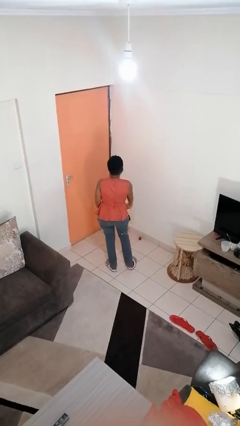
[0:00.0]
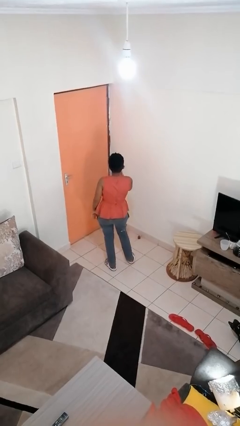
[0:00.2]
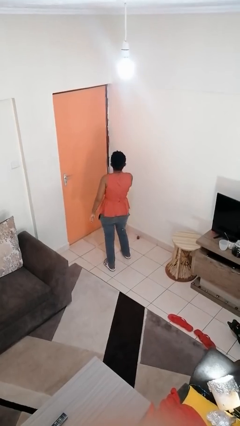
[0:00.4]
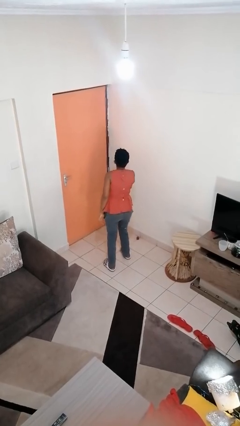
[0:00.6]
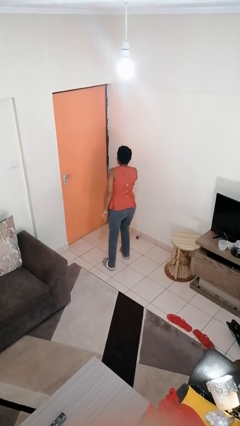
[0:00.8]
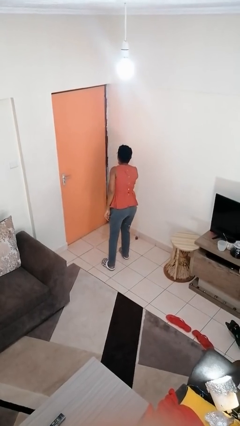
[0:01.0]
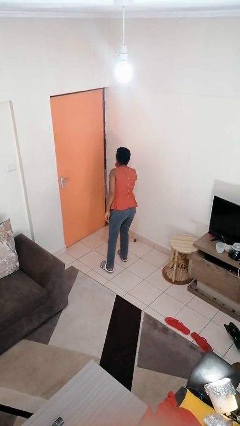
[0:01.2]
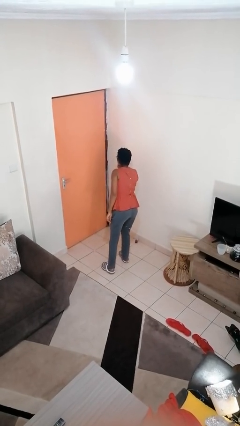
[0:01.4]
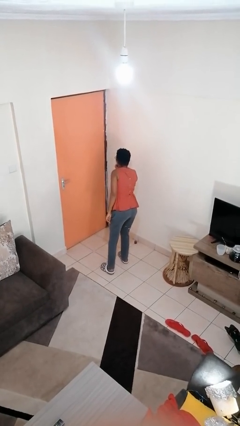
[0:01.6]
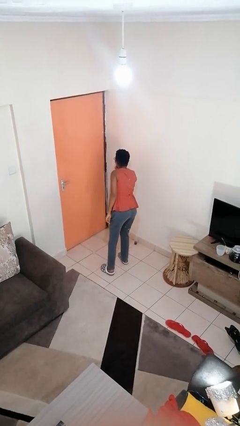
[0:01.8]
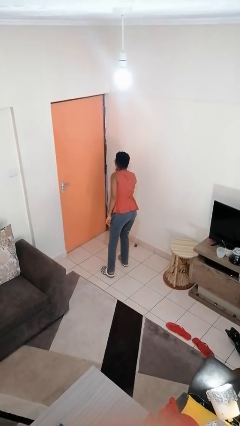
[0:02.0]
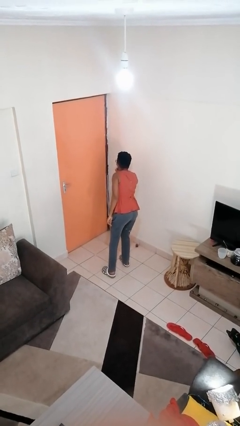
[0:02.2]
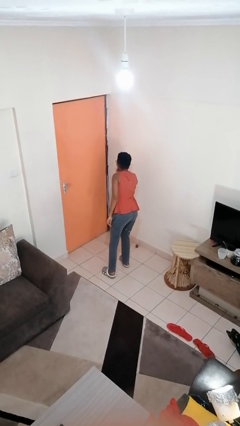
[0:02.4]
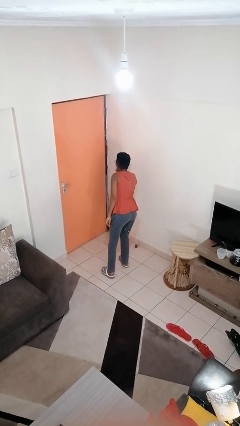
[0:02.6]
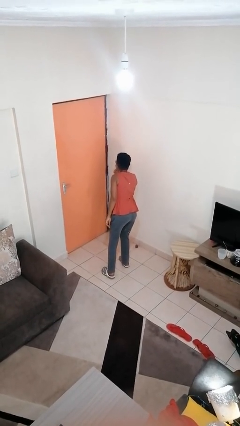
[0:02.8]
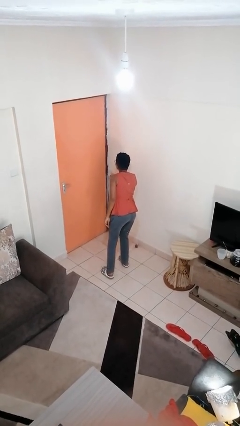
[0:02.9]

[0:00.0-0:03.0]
person gestures be quiet

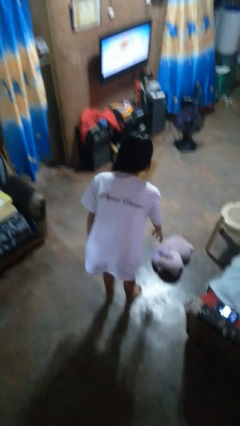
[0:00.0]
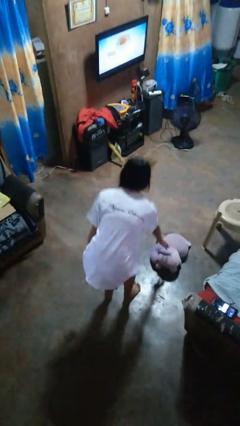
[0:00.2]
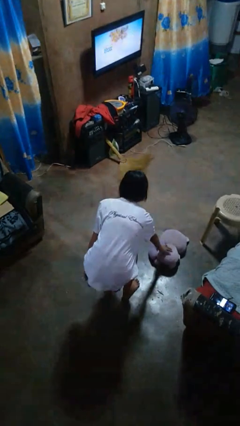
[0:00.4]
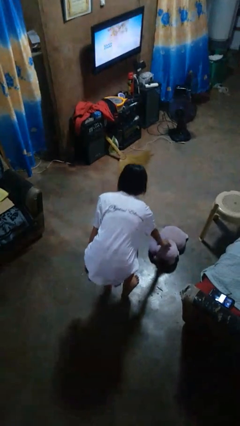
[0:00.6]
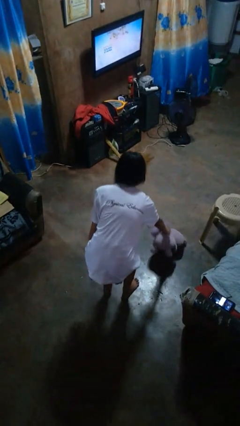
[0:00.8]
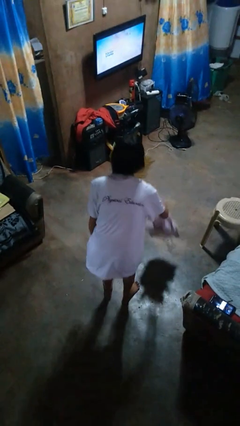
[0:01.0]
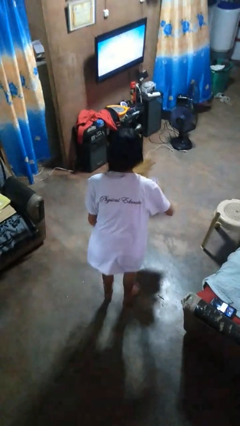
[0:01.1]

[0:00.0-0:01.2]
person picks up object from floor

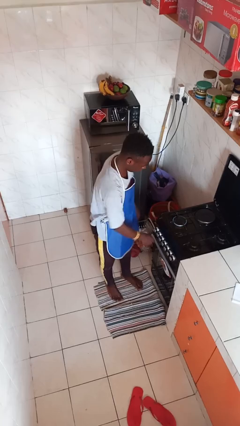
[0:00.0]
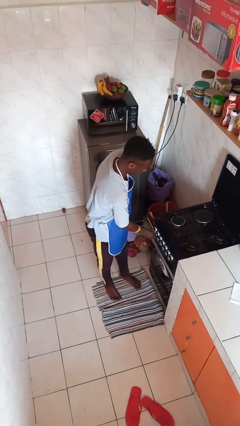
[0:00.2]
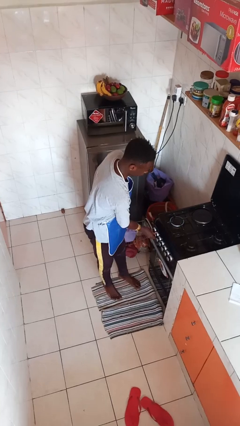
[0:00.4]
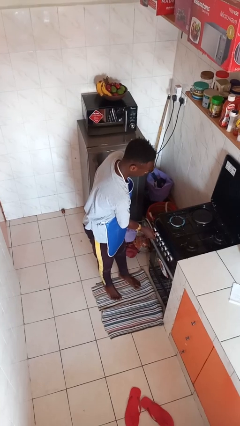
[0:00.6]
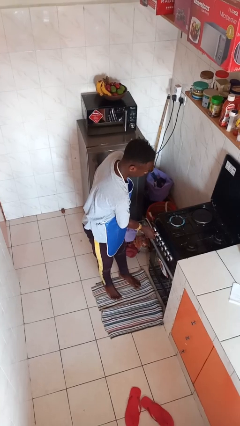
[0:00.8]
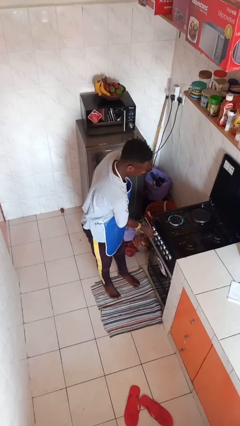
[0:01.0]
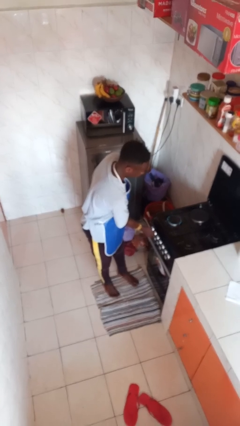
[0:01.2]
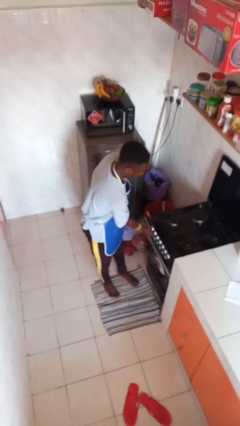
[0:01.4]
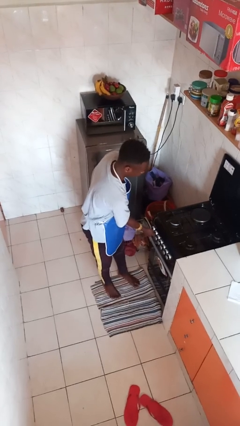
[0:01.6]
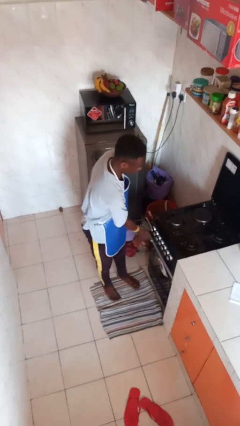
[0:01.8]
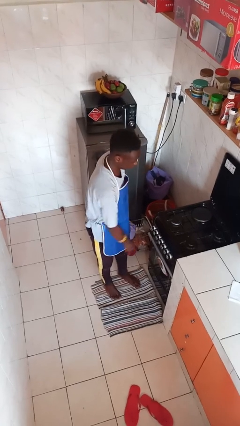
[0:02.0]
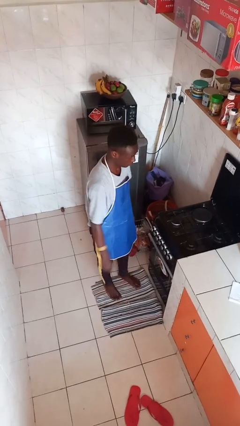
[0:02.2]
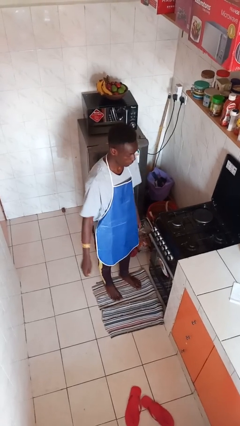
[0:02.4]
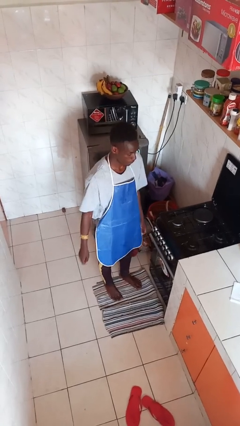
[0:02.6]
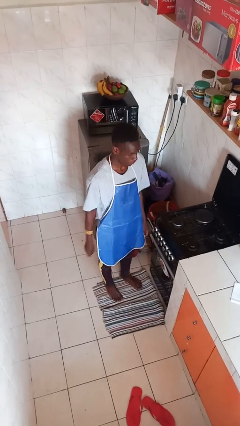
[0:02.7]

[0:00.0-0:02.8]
person turns off stovetop

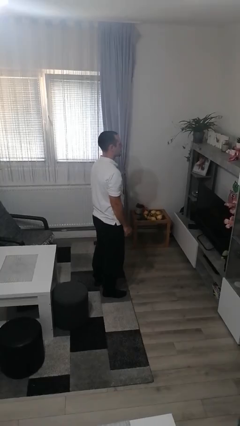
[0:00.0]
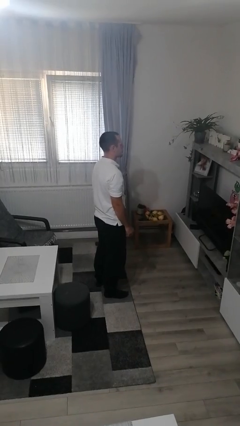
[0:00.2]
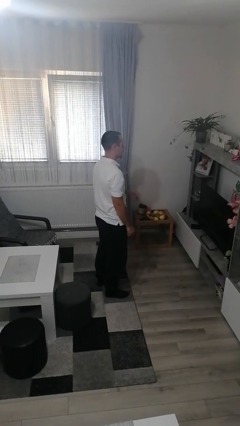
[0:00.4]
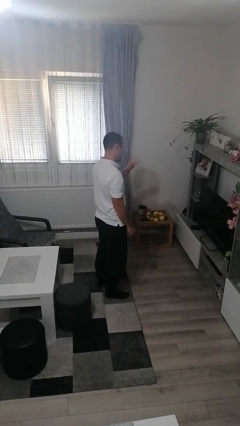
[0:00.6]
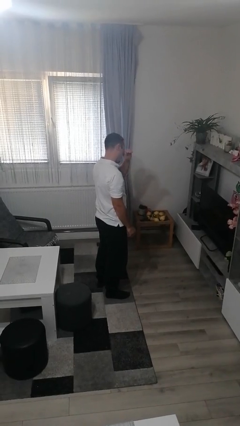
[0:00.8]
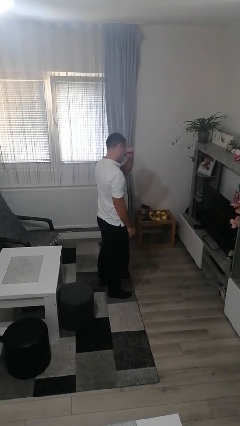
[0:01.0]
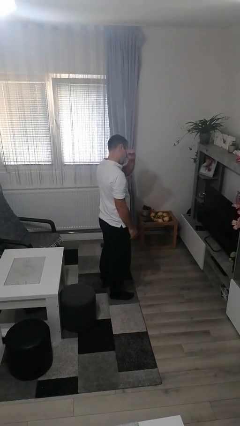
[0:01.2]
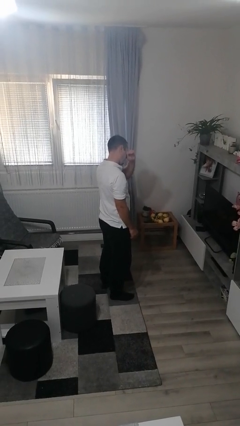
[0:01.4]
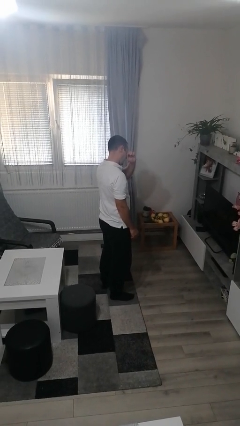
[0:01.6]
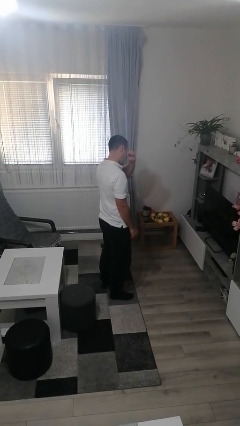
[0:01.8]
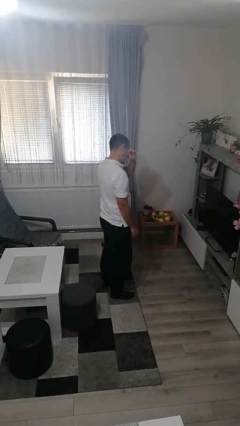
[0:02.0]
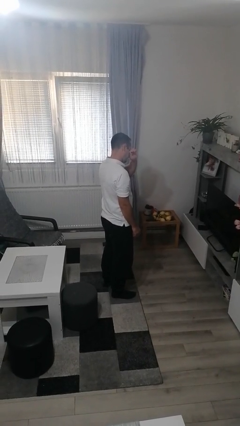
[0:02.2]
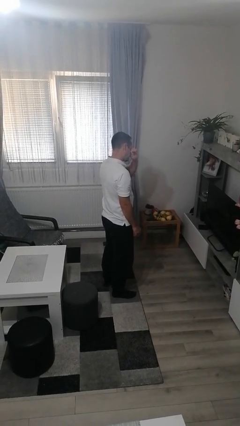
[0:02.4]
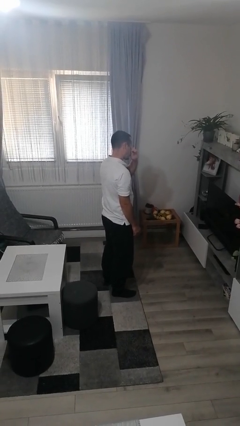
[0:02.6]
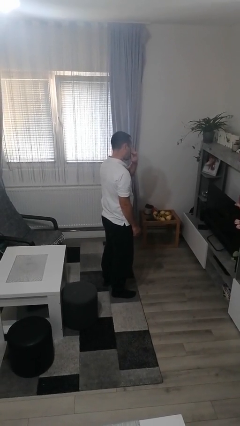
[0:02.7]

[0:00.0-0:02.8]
person rubs eyes

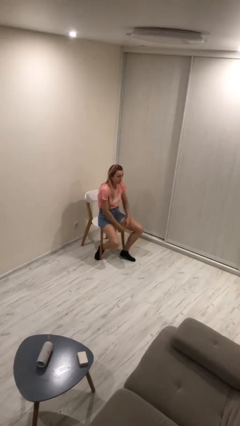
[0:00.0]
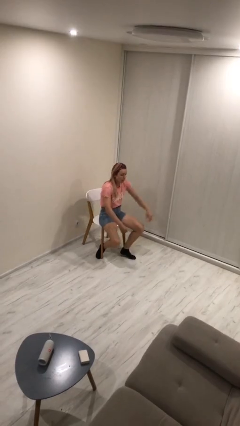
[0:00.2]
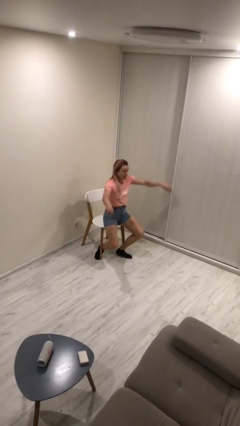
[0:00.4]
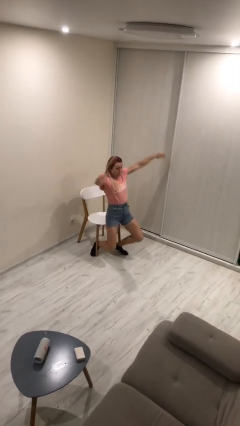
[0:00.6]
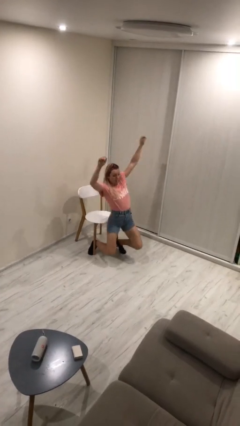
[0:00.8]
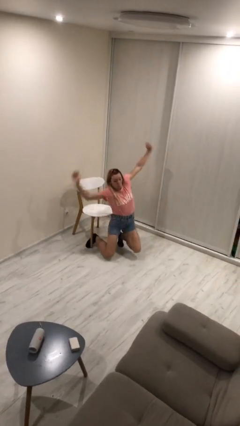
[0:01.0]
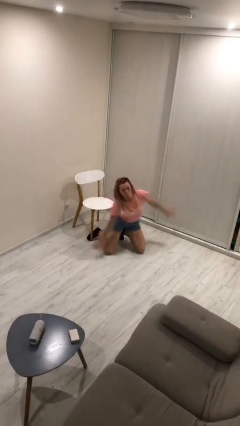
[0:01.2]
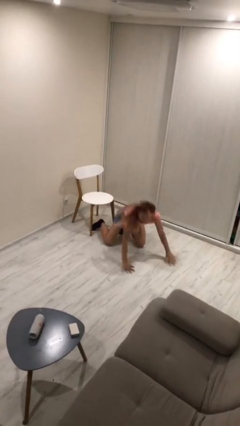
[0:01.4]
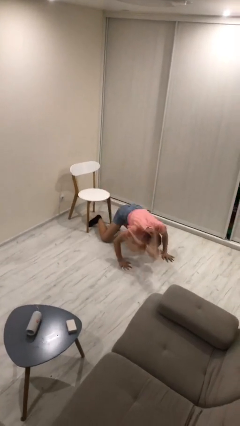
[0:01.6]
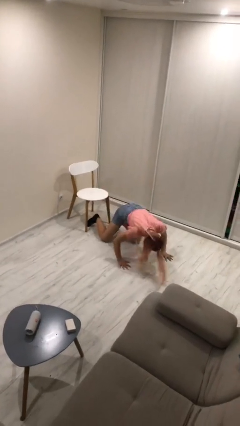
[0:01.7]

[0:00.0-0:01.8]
person falls from chair

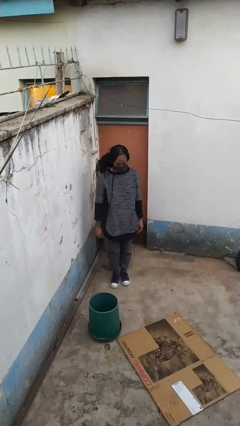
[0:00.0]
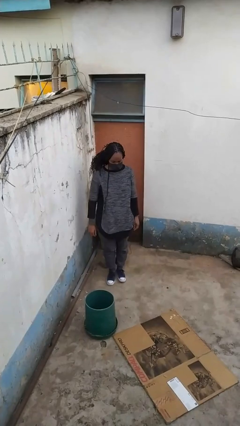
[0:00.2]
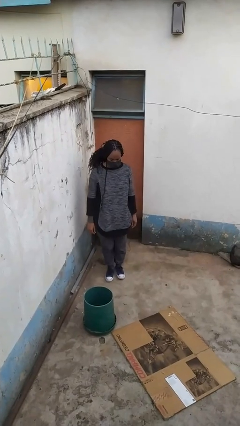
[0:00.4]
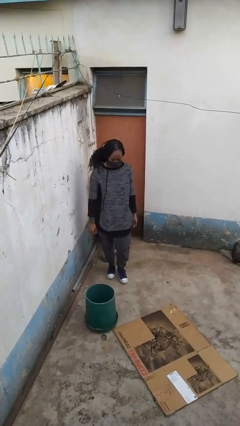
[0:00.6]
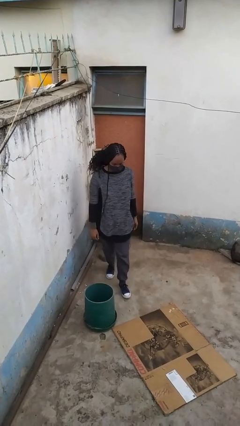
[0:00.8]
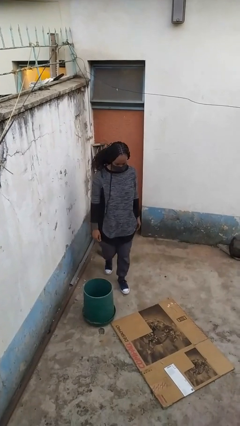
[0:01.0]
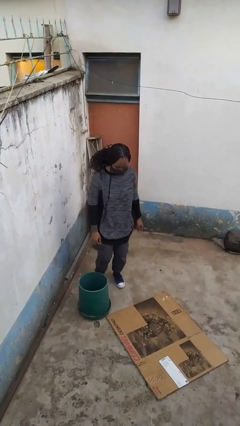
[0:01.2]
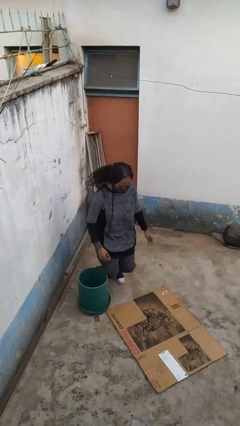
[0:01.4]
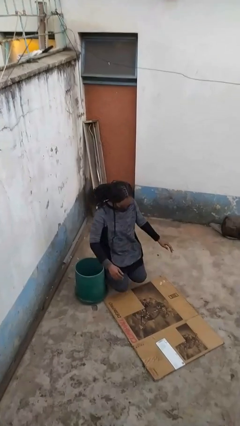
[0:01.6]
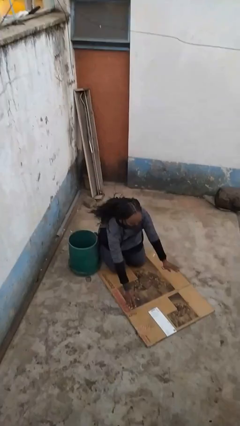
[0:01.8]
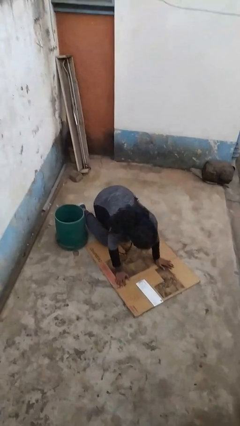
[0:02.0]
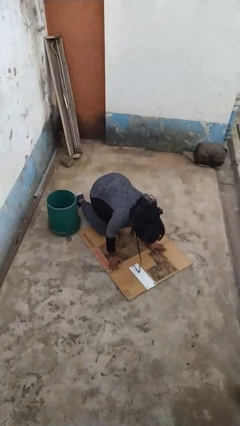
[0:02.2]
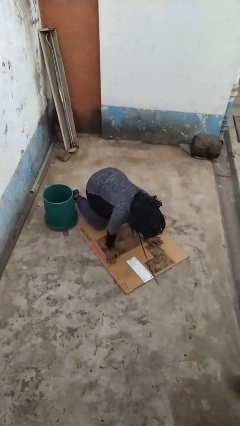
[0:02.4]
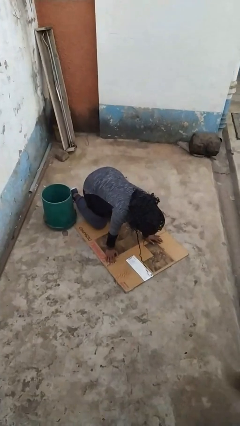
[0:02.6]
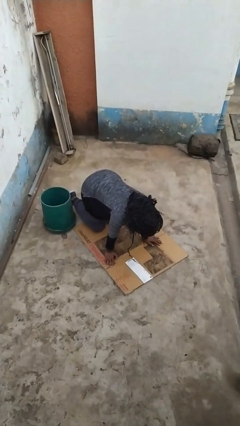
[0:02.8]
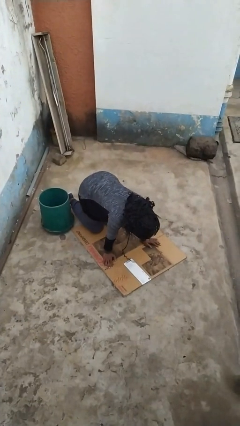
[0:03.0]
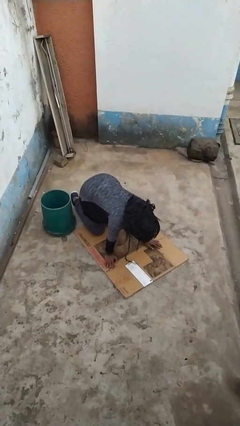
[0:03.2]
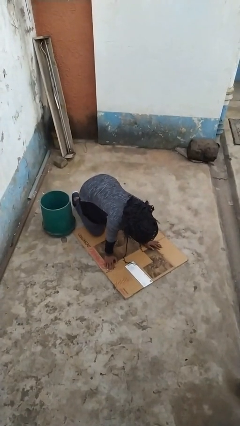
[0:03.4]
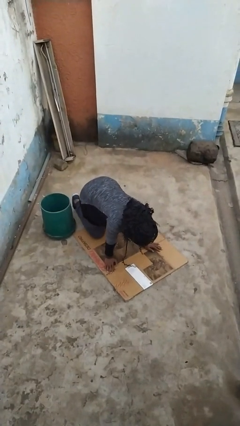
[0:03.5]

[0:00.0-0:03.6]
person trips on object on floor

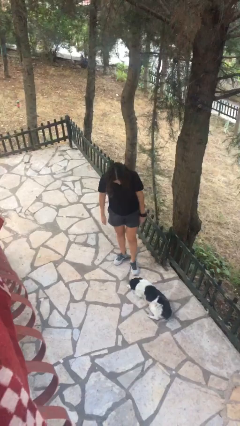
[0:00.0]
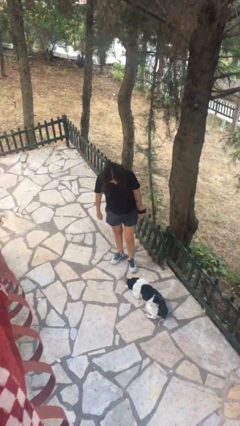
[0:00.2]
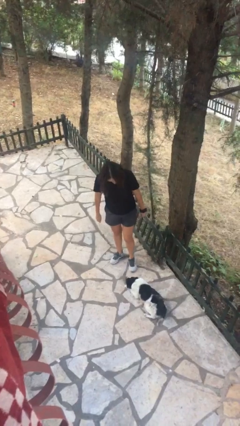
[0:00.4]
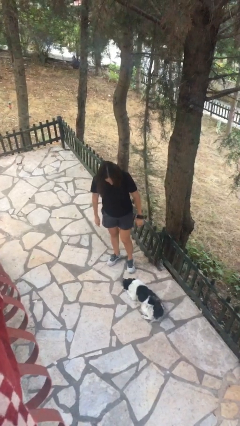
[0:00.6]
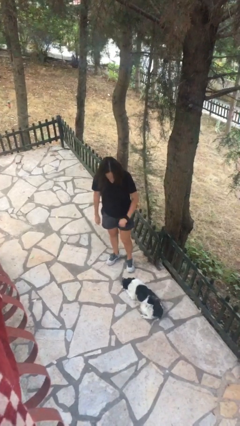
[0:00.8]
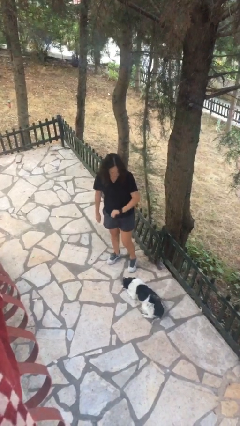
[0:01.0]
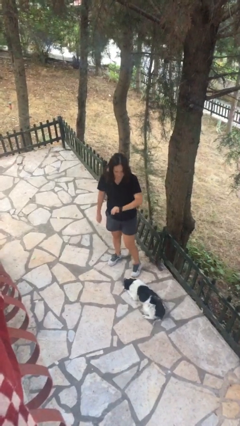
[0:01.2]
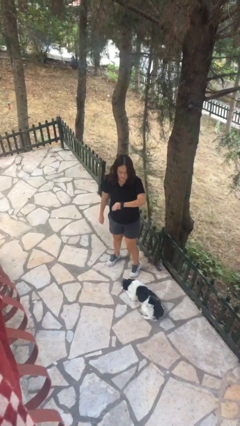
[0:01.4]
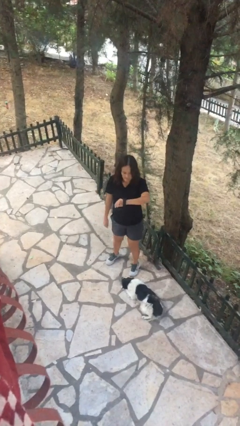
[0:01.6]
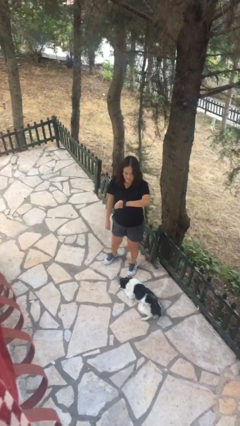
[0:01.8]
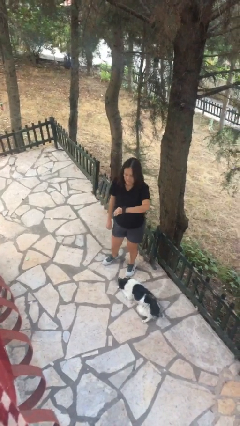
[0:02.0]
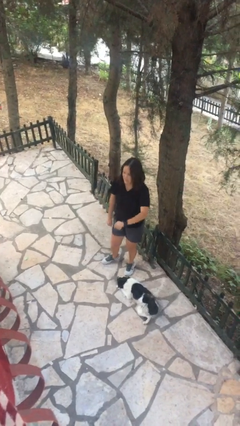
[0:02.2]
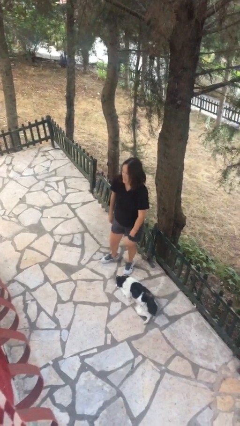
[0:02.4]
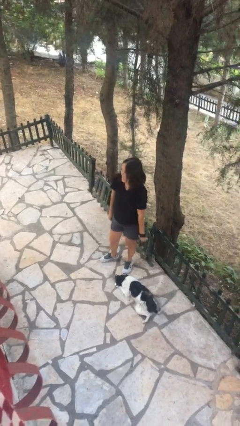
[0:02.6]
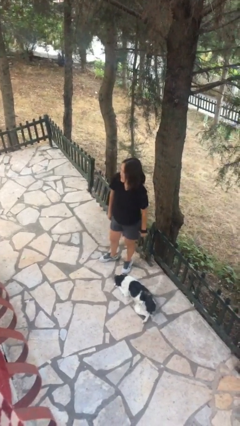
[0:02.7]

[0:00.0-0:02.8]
person looks at wristwatch
